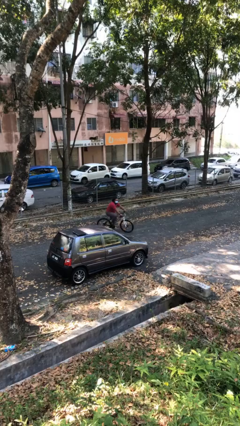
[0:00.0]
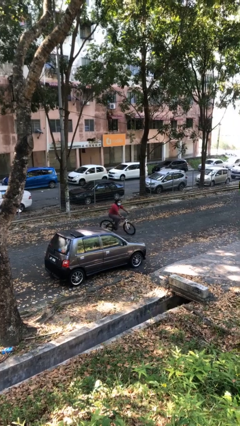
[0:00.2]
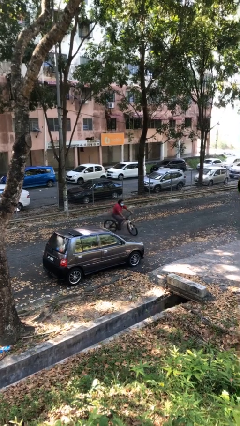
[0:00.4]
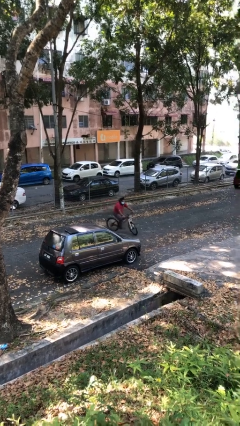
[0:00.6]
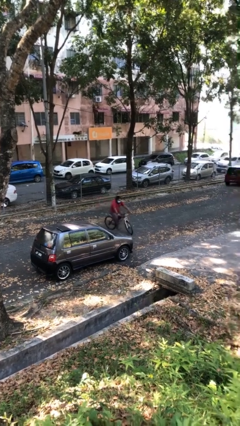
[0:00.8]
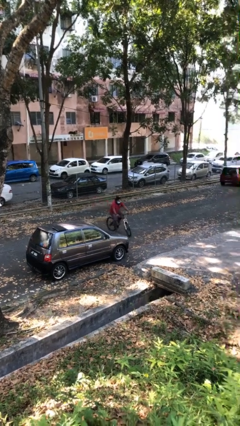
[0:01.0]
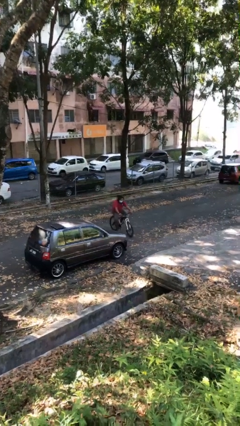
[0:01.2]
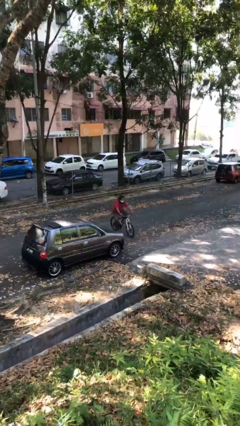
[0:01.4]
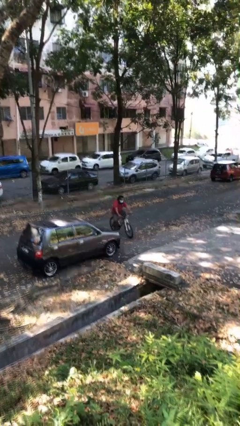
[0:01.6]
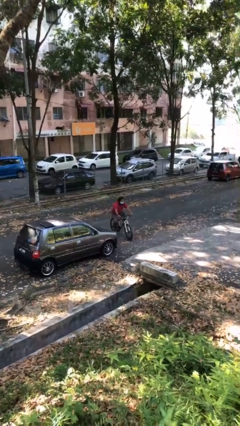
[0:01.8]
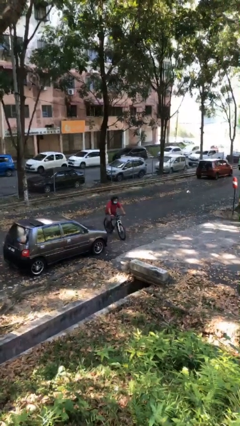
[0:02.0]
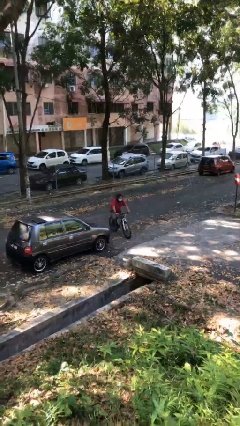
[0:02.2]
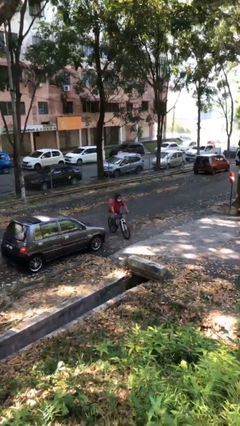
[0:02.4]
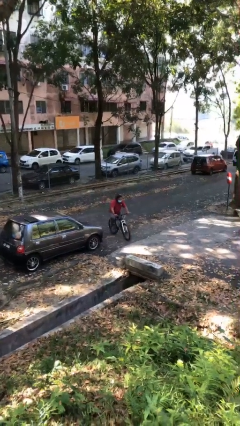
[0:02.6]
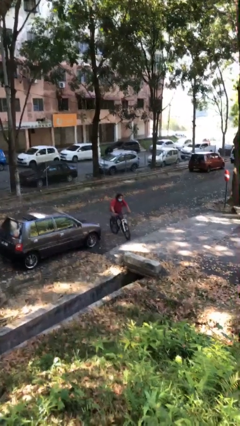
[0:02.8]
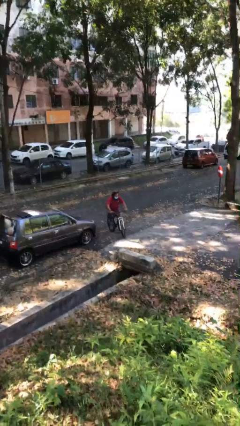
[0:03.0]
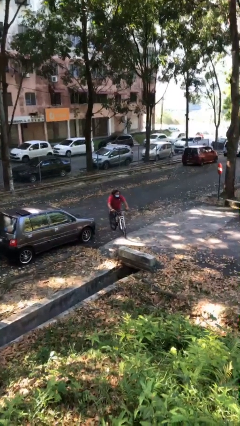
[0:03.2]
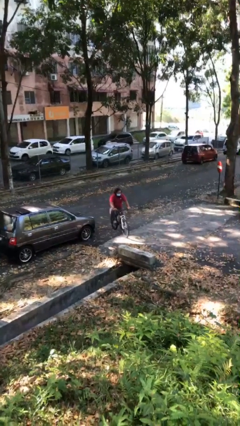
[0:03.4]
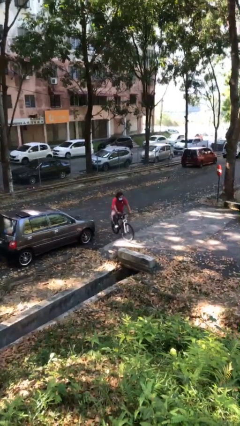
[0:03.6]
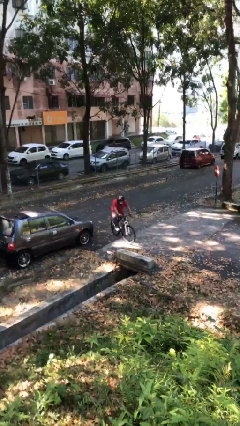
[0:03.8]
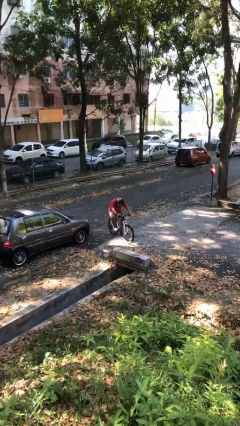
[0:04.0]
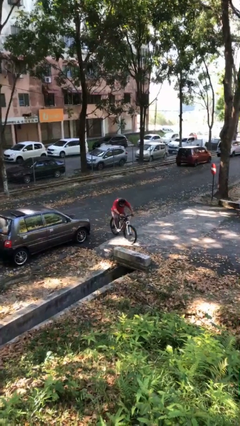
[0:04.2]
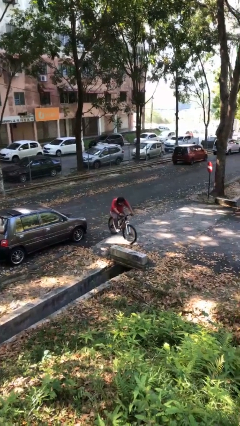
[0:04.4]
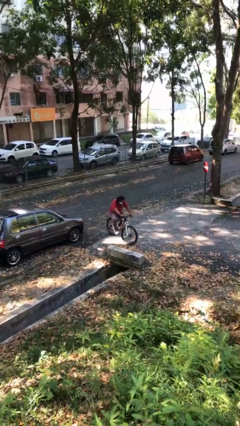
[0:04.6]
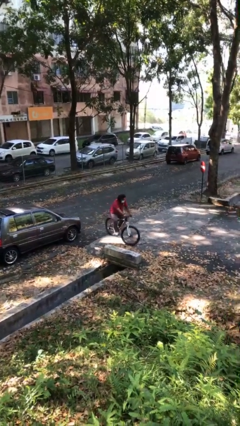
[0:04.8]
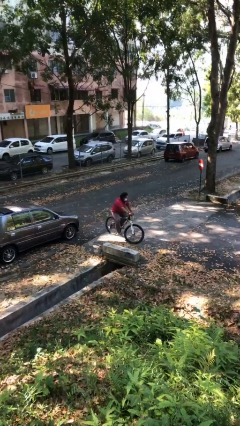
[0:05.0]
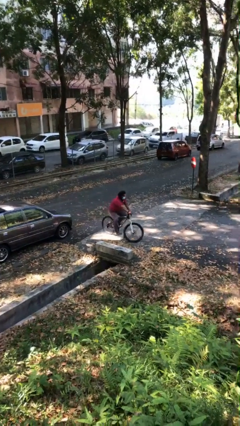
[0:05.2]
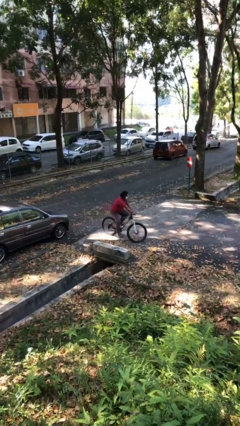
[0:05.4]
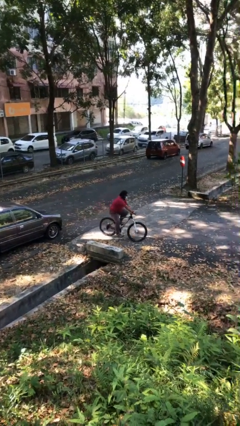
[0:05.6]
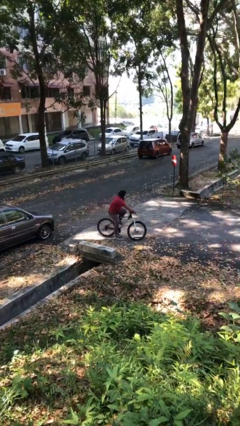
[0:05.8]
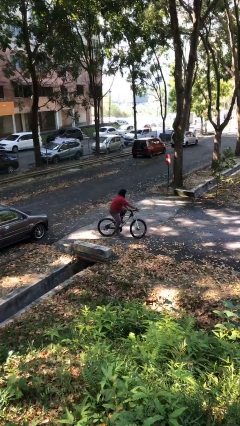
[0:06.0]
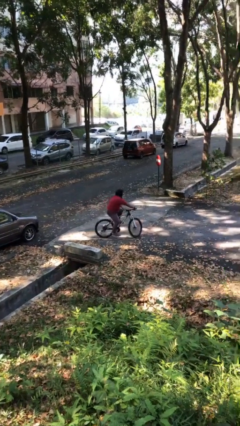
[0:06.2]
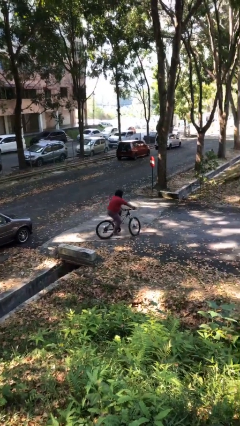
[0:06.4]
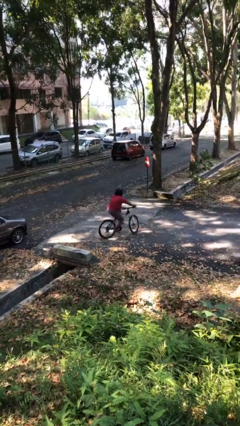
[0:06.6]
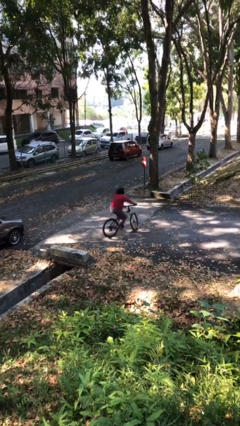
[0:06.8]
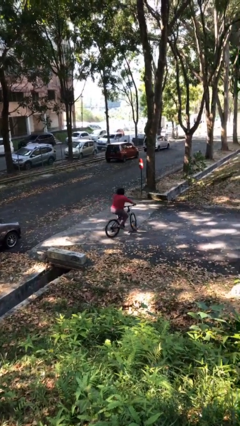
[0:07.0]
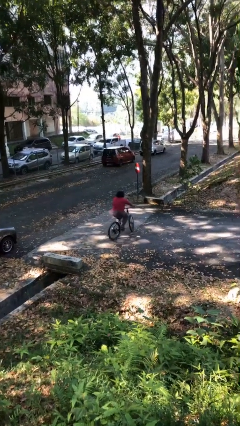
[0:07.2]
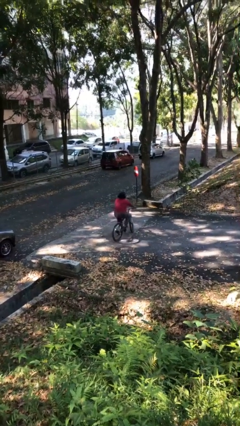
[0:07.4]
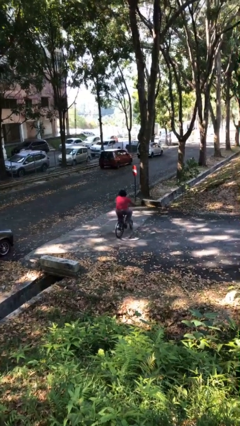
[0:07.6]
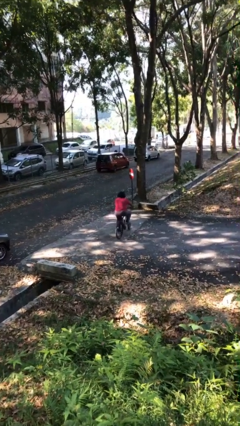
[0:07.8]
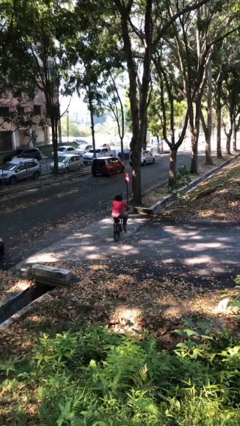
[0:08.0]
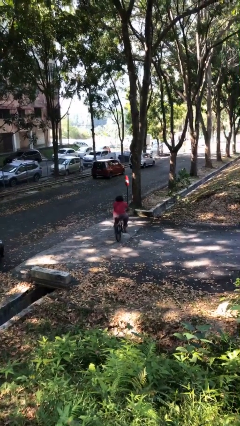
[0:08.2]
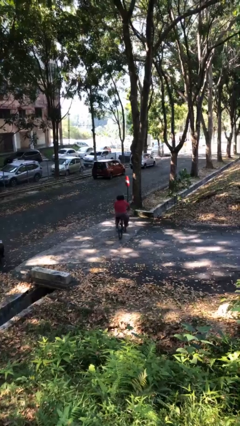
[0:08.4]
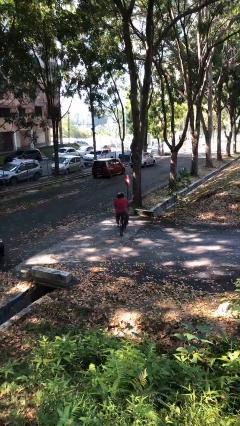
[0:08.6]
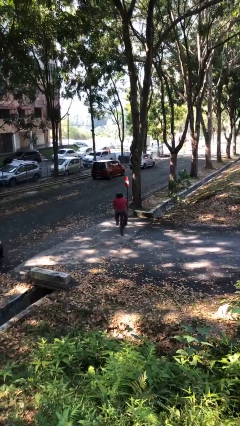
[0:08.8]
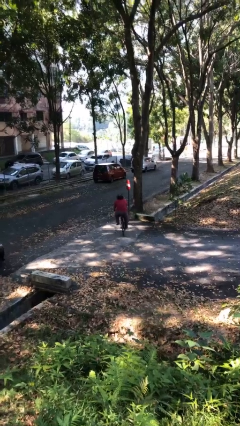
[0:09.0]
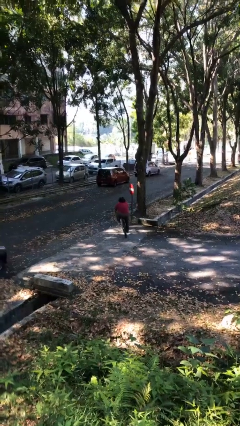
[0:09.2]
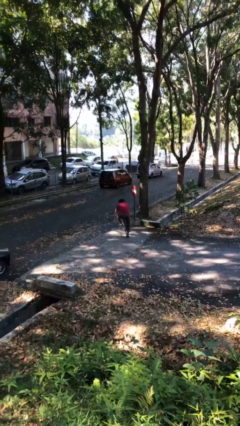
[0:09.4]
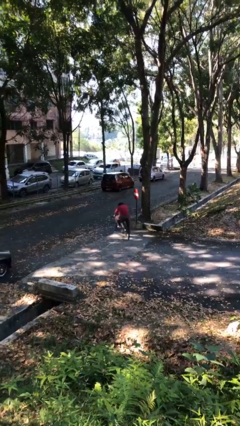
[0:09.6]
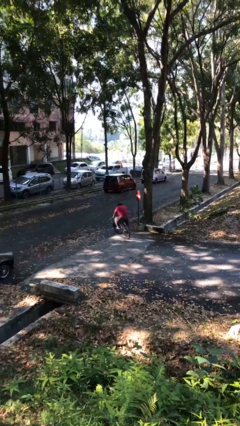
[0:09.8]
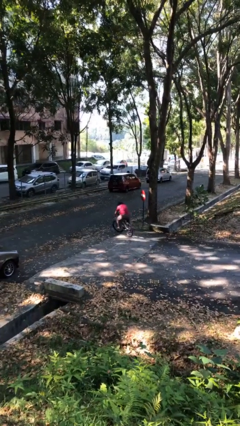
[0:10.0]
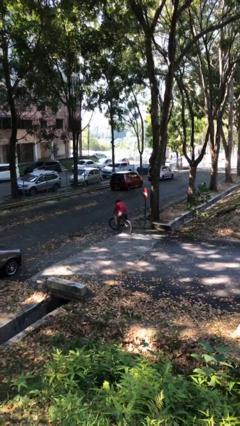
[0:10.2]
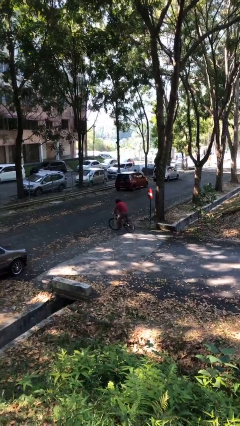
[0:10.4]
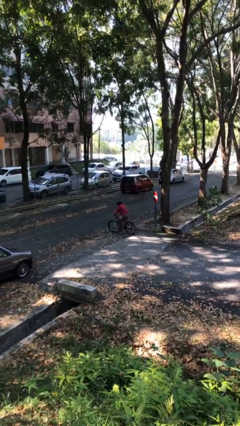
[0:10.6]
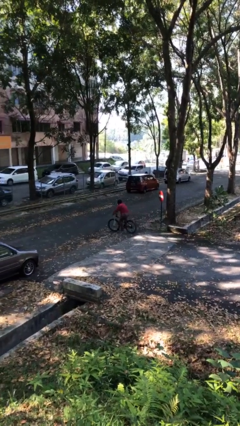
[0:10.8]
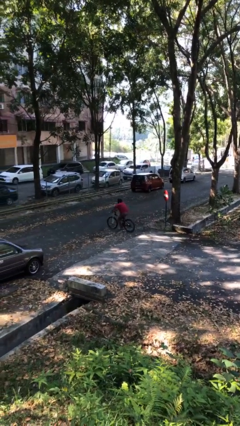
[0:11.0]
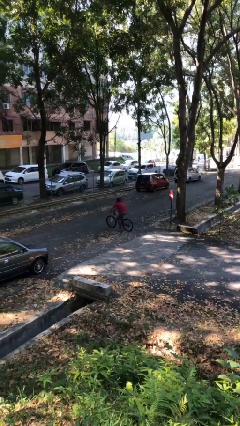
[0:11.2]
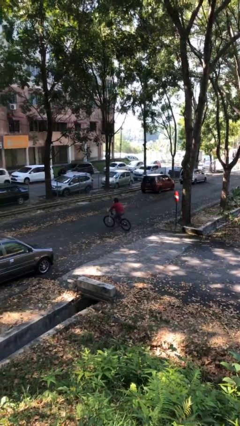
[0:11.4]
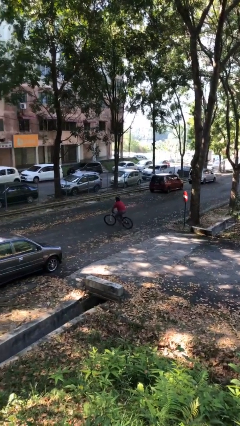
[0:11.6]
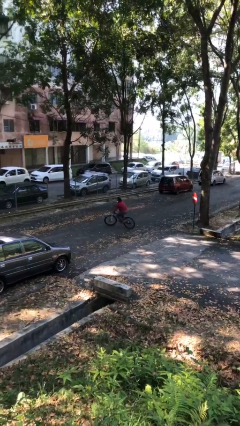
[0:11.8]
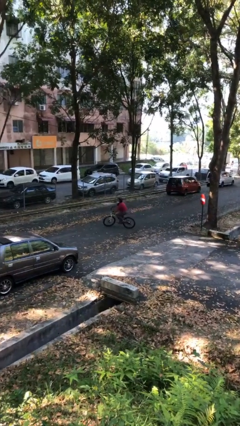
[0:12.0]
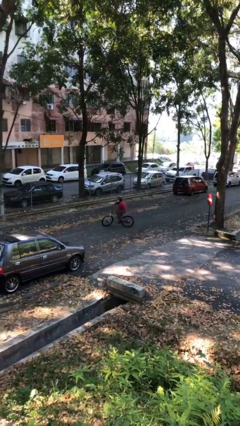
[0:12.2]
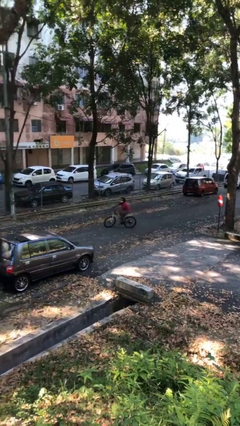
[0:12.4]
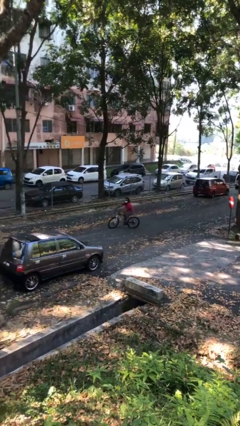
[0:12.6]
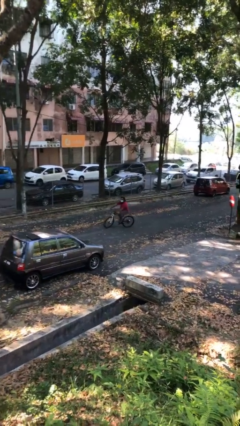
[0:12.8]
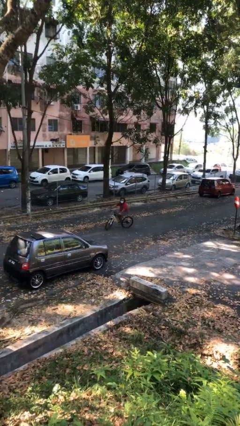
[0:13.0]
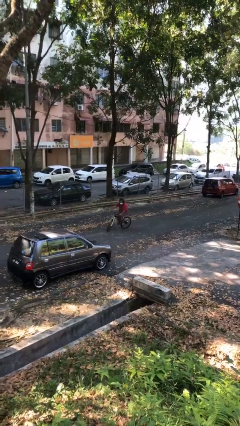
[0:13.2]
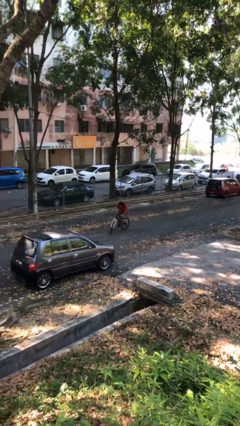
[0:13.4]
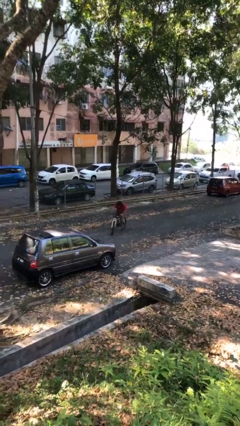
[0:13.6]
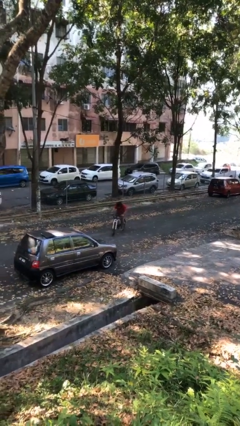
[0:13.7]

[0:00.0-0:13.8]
person rides bicycle

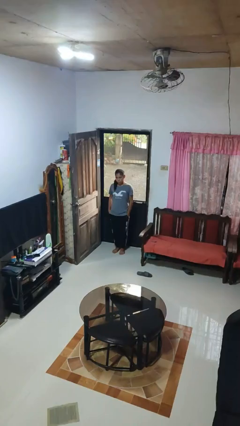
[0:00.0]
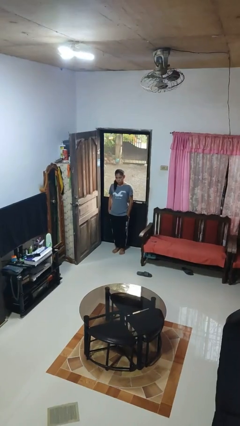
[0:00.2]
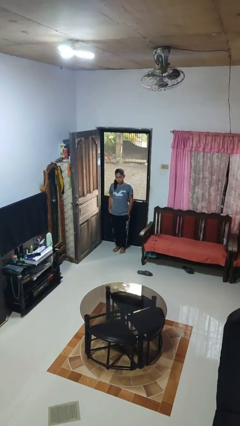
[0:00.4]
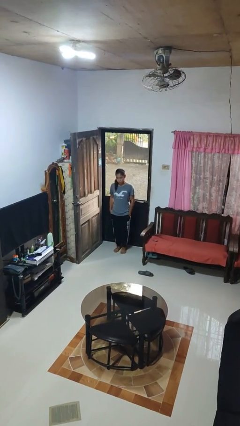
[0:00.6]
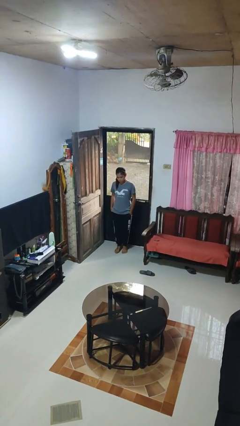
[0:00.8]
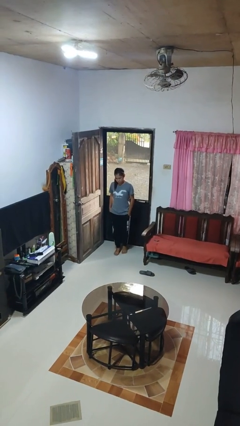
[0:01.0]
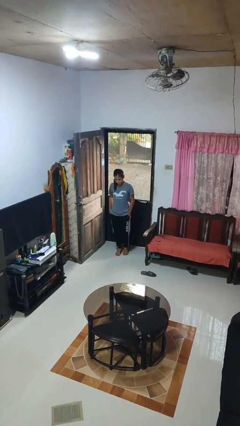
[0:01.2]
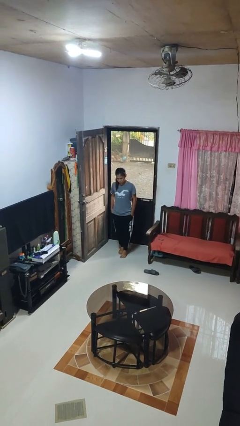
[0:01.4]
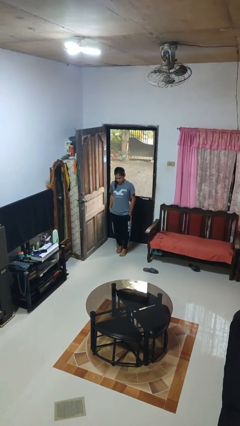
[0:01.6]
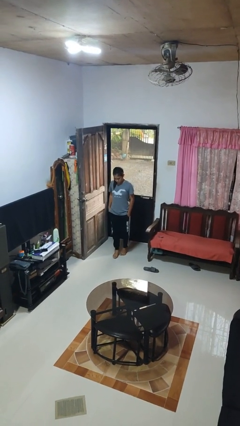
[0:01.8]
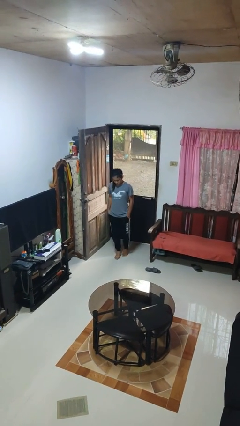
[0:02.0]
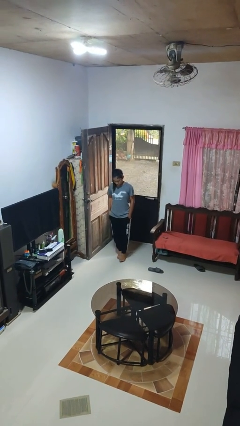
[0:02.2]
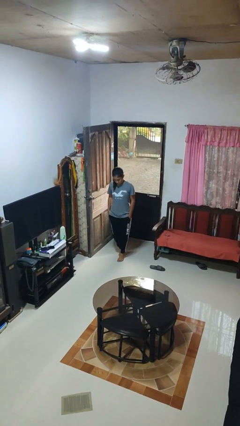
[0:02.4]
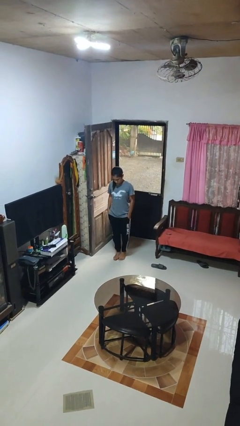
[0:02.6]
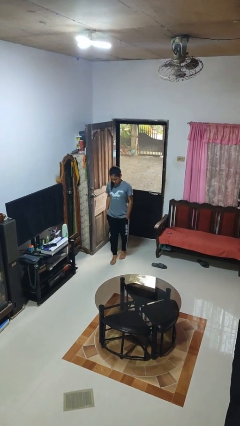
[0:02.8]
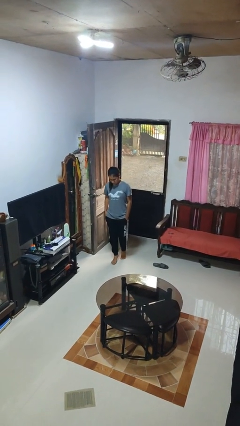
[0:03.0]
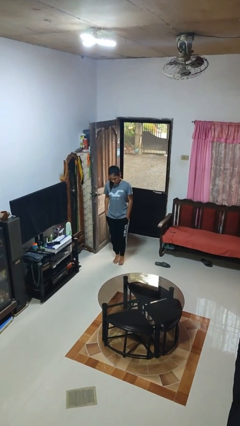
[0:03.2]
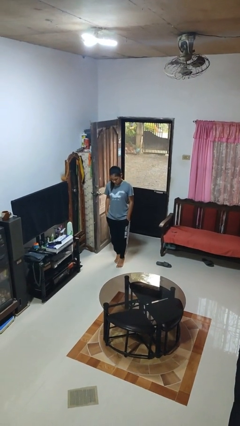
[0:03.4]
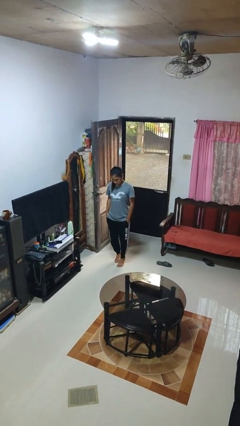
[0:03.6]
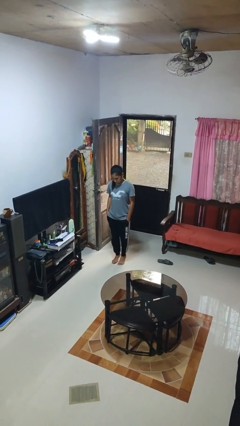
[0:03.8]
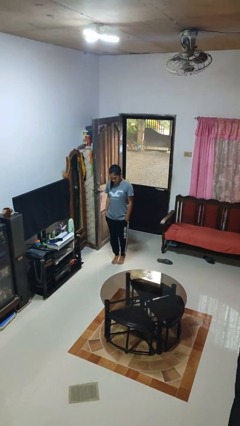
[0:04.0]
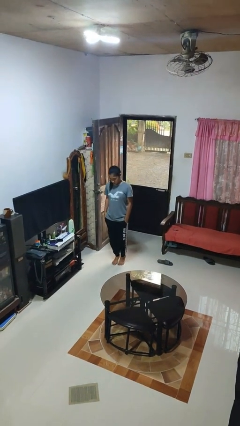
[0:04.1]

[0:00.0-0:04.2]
person walks tiptoe
